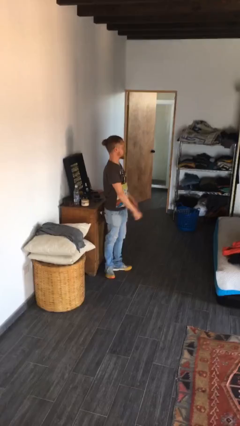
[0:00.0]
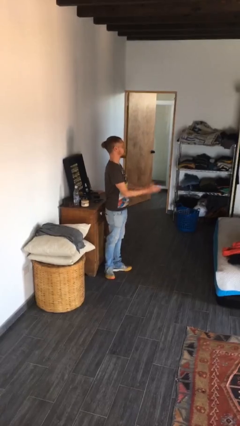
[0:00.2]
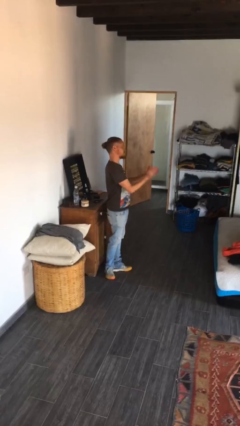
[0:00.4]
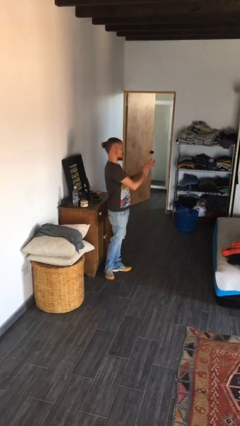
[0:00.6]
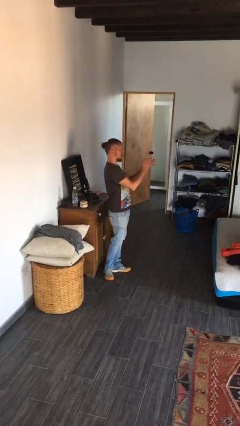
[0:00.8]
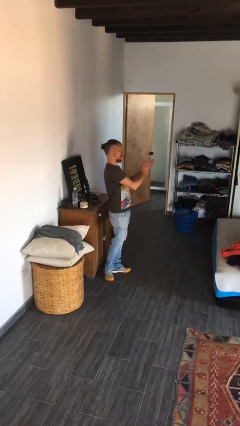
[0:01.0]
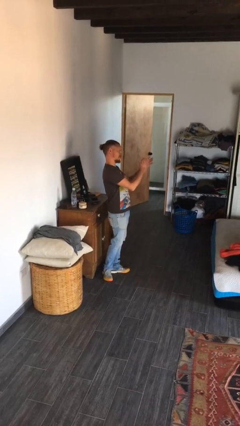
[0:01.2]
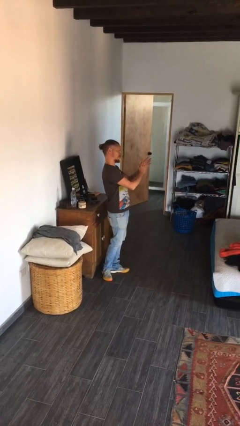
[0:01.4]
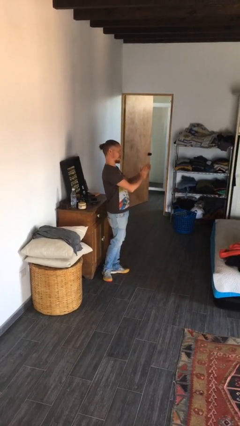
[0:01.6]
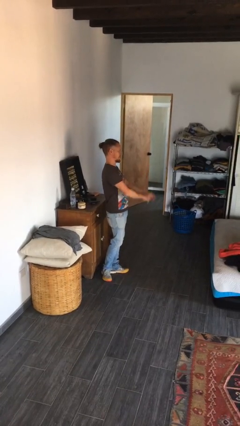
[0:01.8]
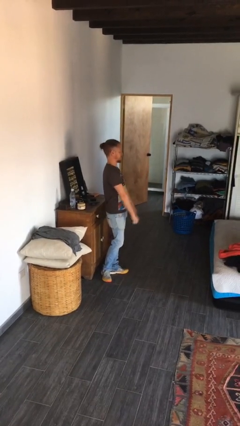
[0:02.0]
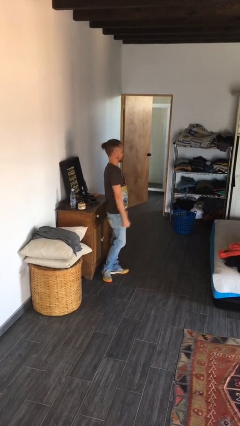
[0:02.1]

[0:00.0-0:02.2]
person claps hands

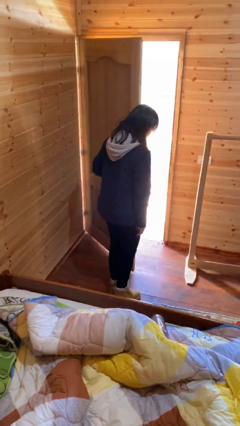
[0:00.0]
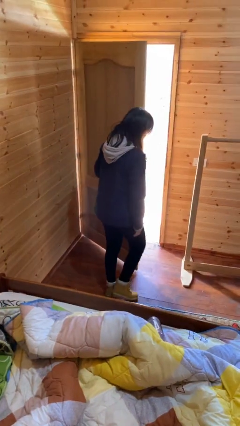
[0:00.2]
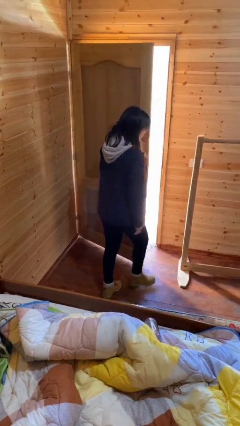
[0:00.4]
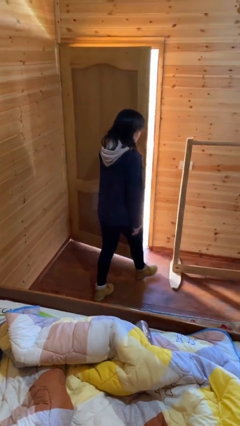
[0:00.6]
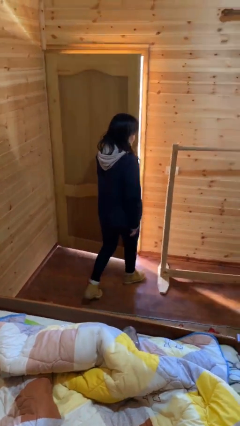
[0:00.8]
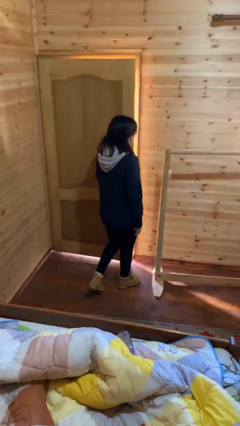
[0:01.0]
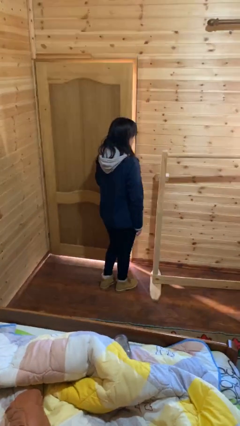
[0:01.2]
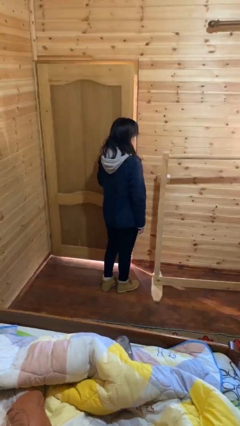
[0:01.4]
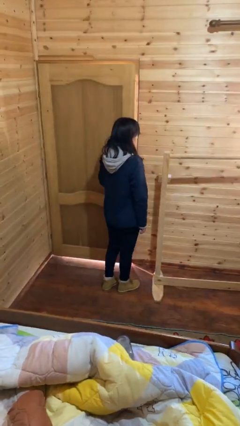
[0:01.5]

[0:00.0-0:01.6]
person closes facility door

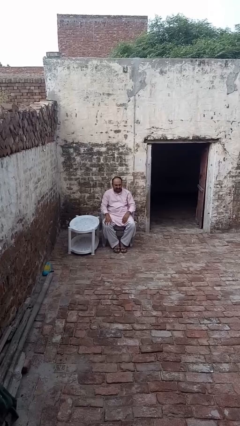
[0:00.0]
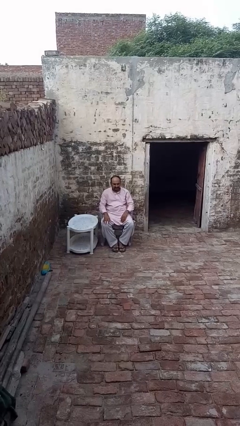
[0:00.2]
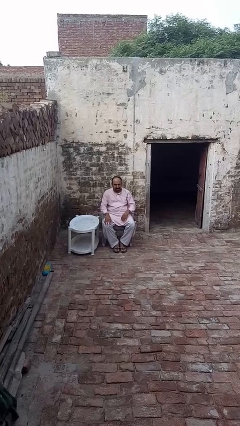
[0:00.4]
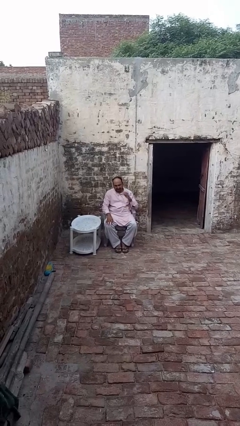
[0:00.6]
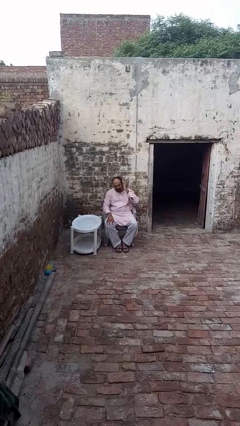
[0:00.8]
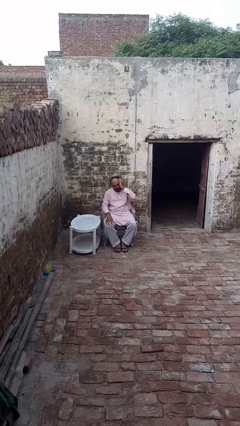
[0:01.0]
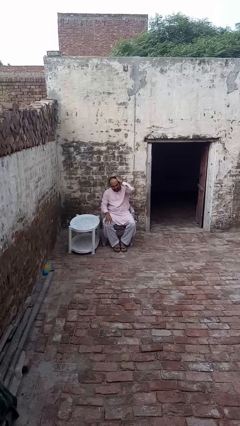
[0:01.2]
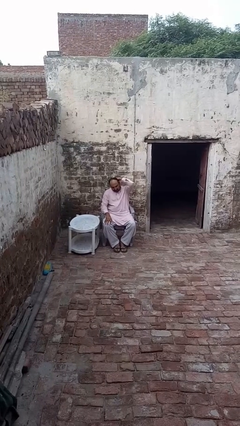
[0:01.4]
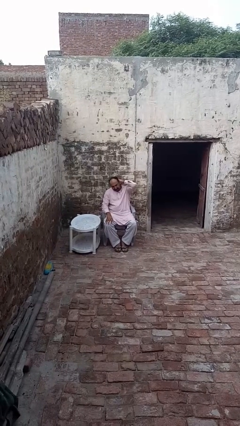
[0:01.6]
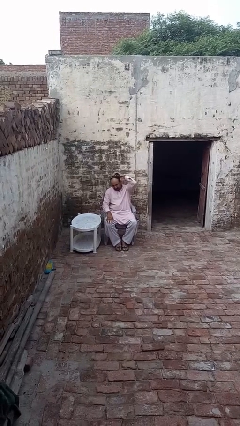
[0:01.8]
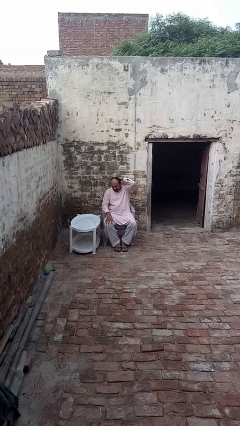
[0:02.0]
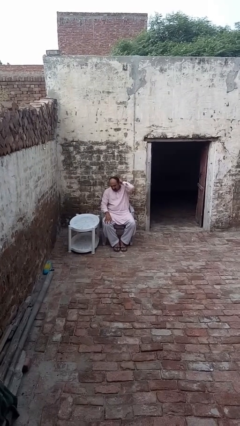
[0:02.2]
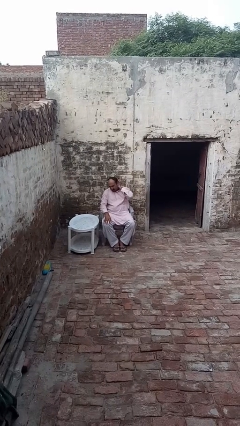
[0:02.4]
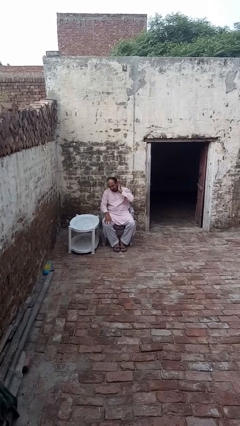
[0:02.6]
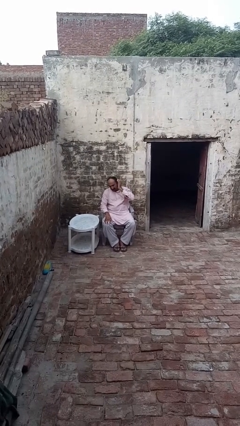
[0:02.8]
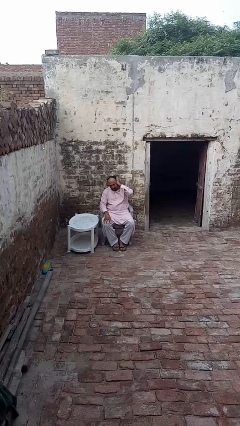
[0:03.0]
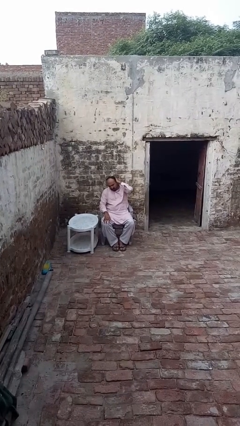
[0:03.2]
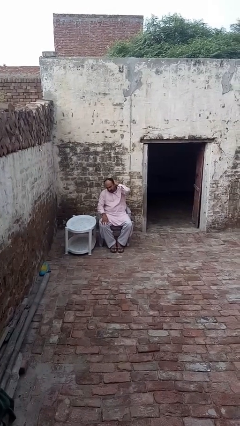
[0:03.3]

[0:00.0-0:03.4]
person strokes hair

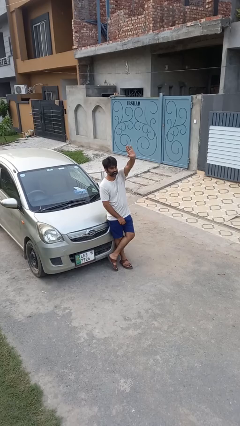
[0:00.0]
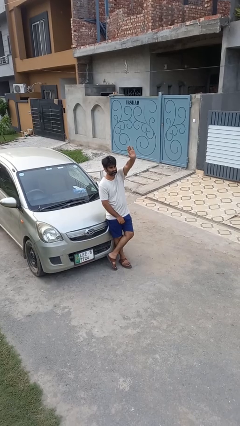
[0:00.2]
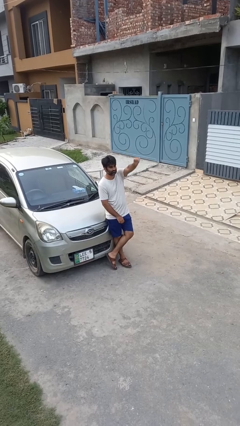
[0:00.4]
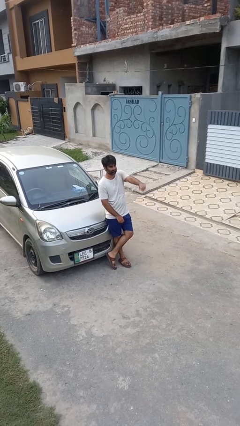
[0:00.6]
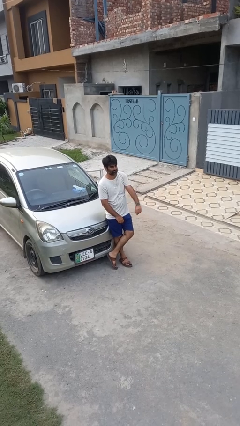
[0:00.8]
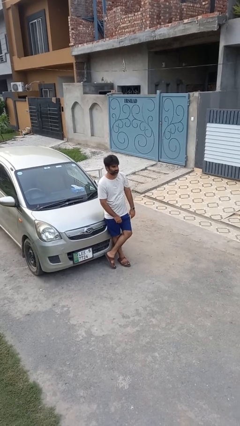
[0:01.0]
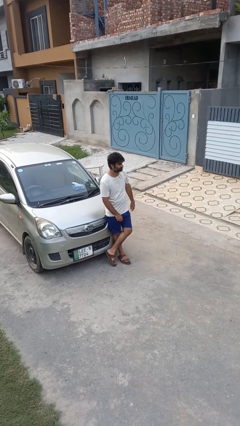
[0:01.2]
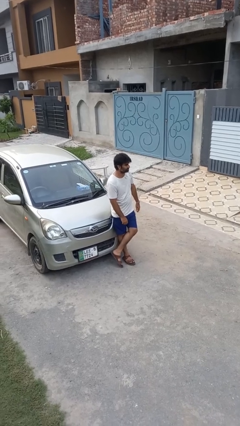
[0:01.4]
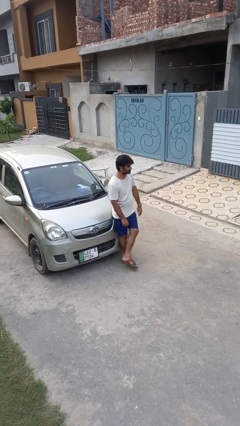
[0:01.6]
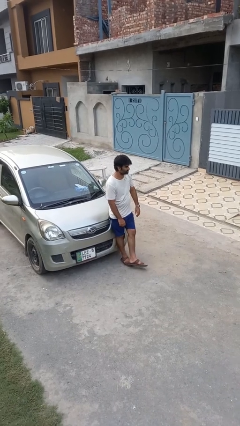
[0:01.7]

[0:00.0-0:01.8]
person gestures lower hand

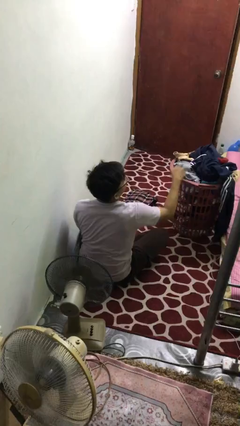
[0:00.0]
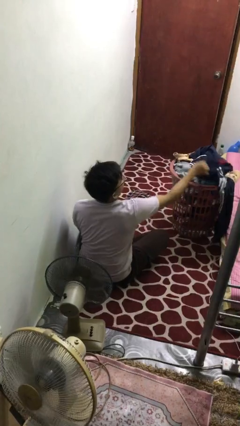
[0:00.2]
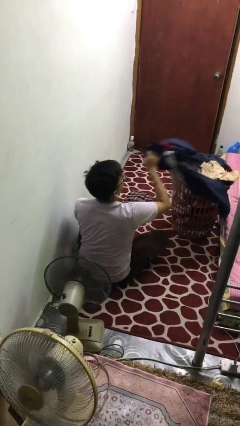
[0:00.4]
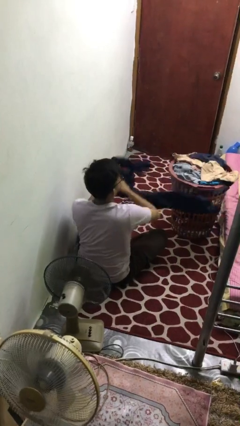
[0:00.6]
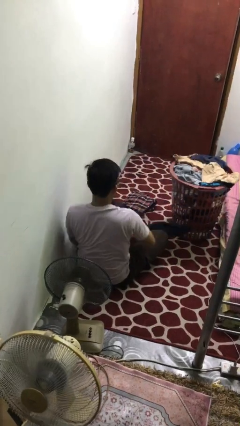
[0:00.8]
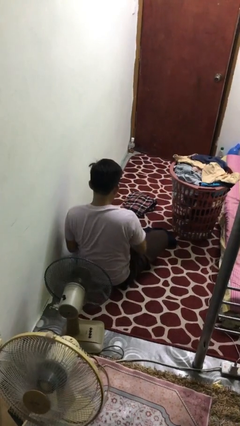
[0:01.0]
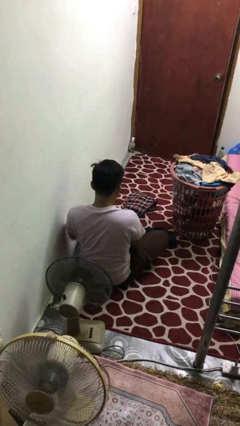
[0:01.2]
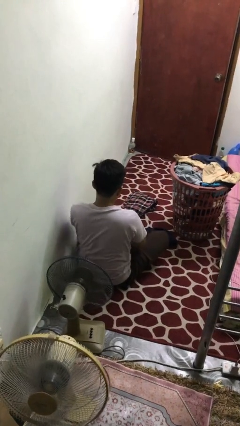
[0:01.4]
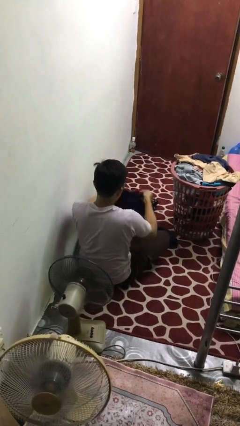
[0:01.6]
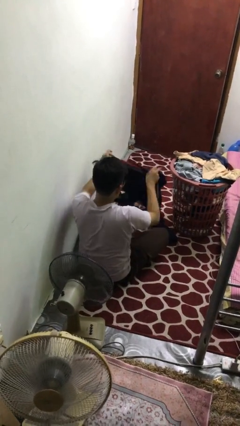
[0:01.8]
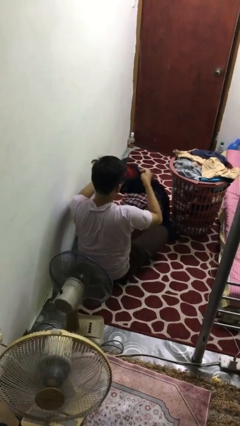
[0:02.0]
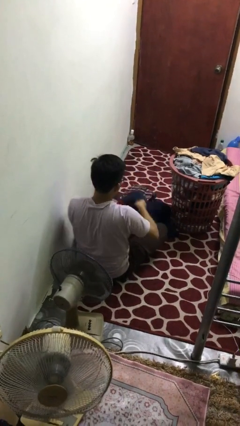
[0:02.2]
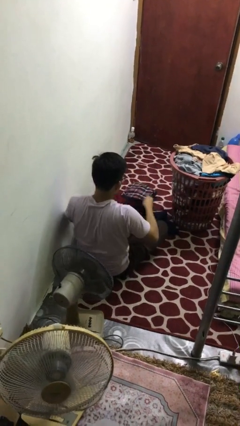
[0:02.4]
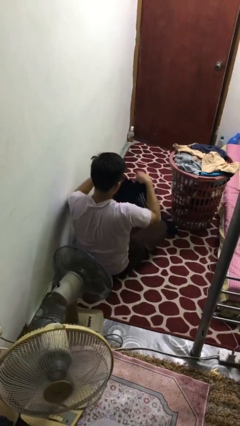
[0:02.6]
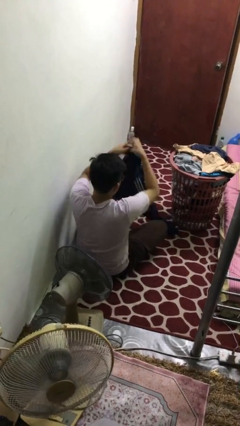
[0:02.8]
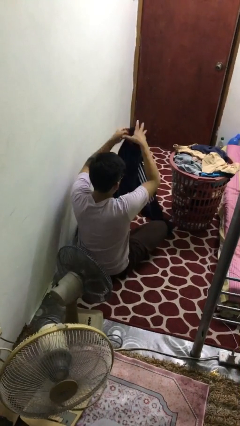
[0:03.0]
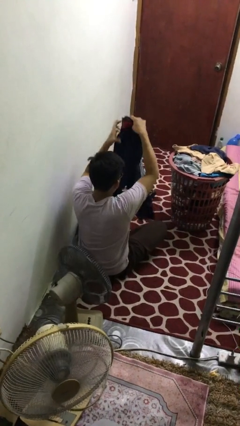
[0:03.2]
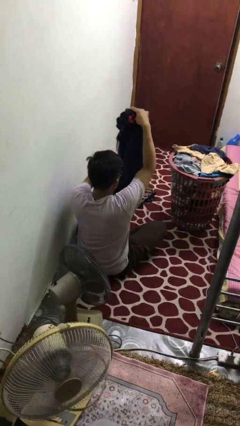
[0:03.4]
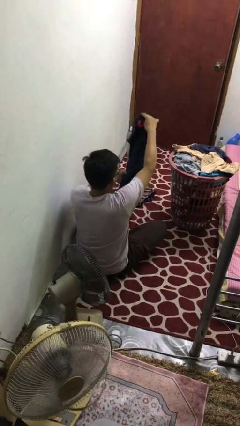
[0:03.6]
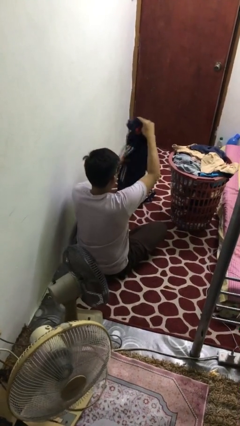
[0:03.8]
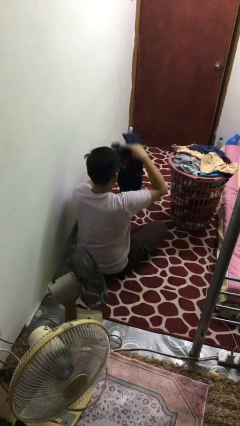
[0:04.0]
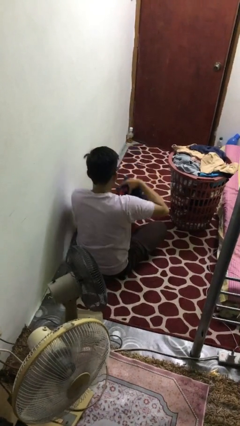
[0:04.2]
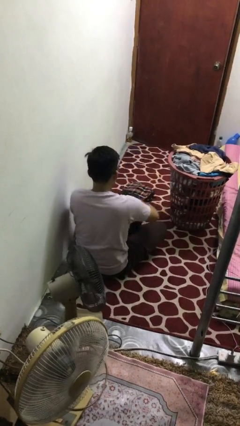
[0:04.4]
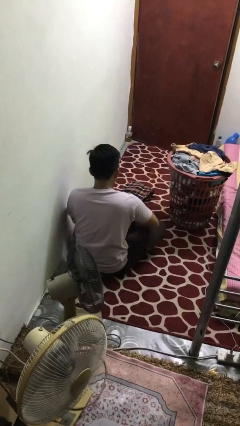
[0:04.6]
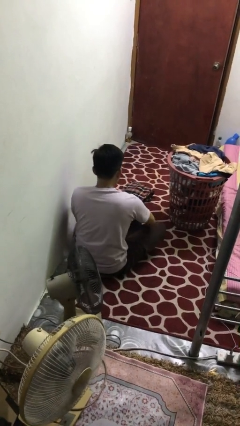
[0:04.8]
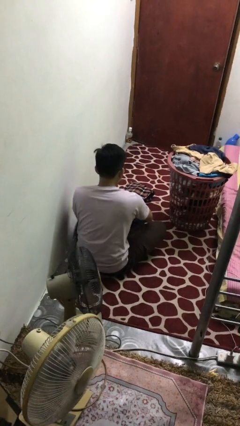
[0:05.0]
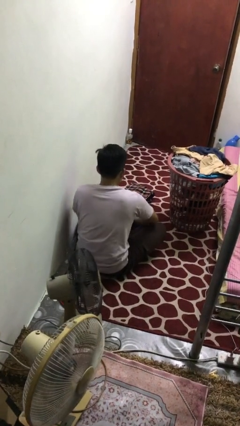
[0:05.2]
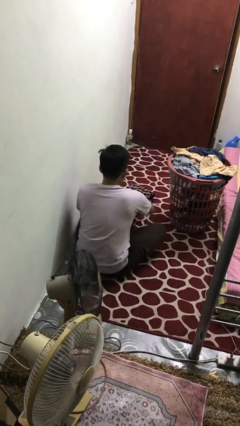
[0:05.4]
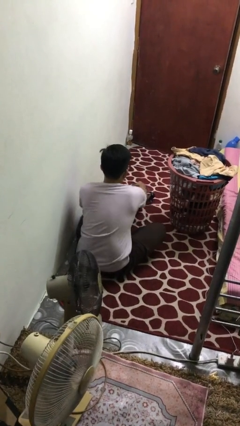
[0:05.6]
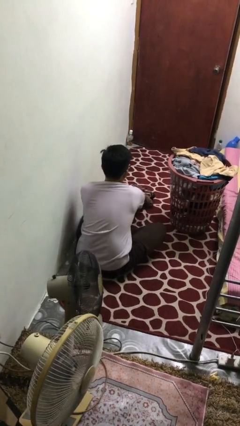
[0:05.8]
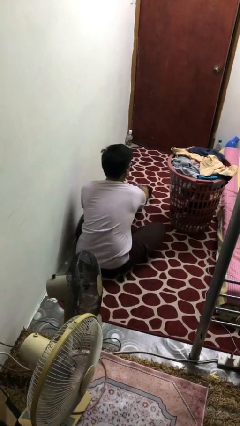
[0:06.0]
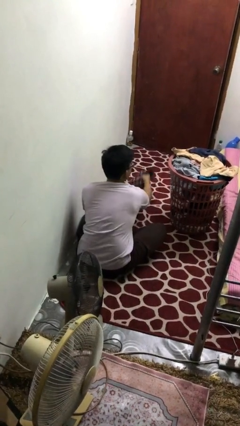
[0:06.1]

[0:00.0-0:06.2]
person folds pants

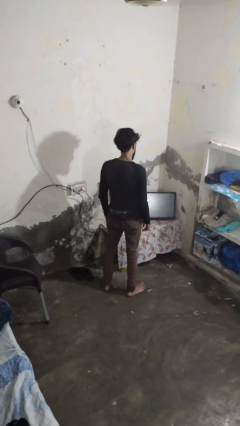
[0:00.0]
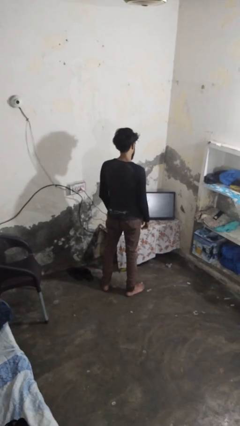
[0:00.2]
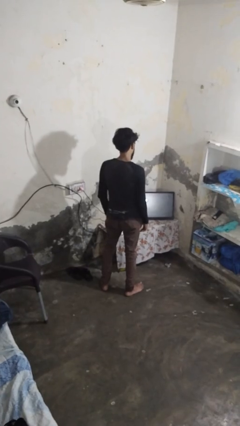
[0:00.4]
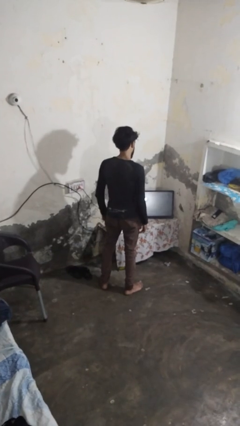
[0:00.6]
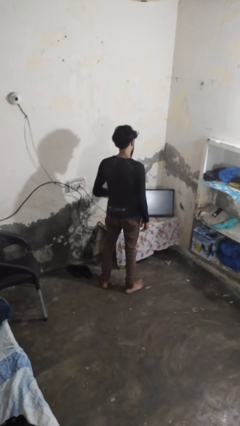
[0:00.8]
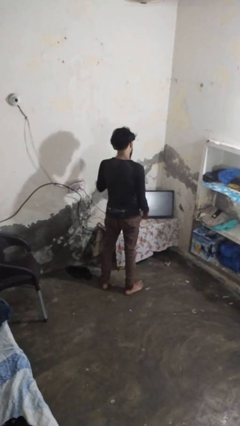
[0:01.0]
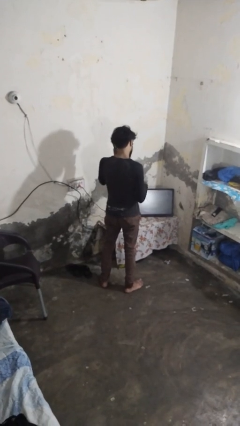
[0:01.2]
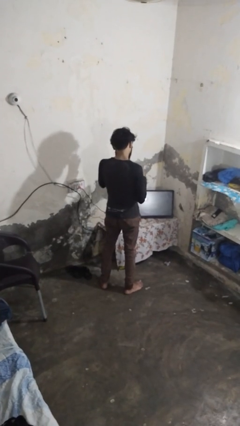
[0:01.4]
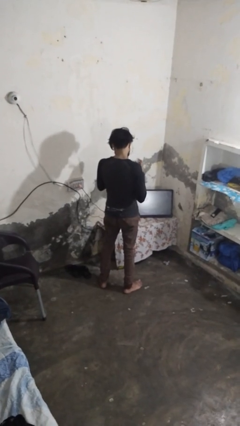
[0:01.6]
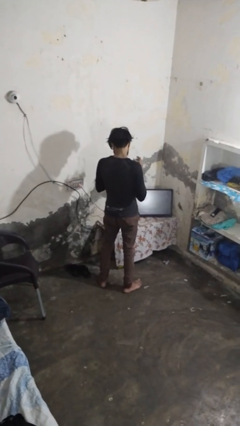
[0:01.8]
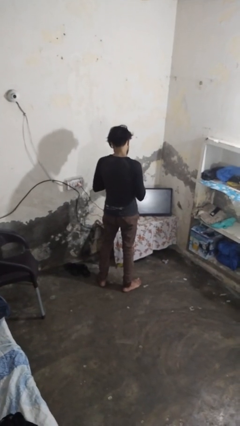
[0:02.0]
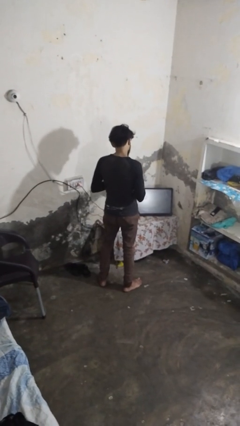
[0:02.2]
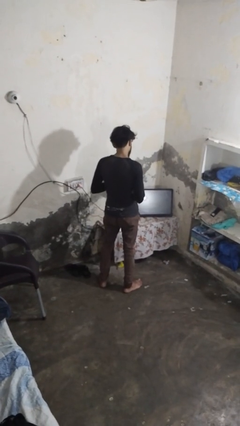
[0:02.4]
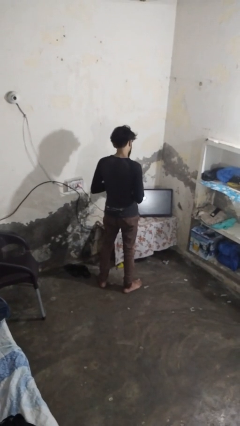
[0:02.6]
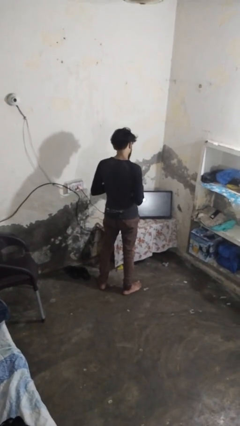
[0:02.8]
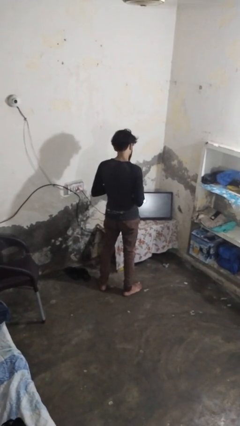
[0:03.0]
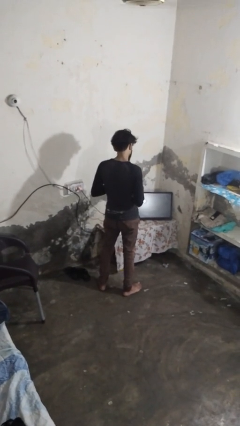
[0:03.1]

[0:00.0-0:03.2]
person takes off glasses
